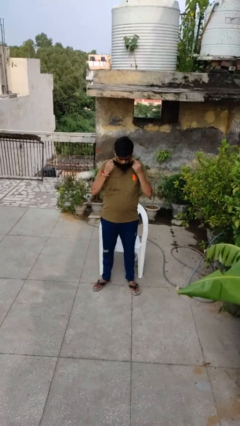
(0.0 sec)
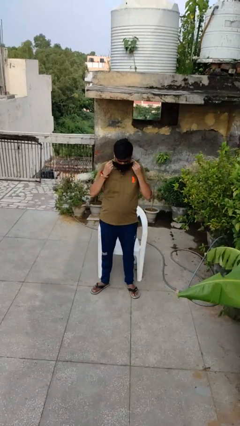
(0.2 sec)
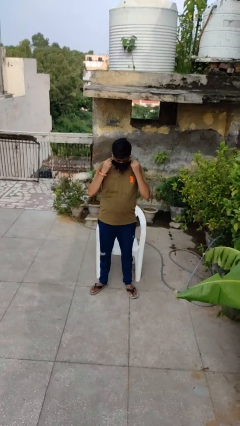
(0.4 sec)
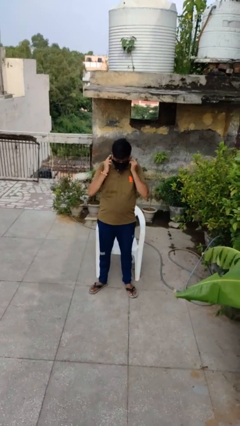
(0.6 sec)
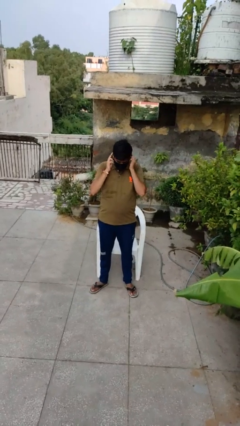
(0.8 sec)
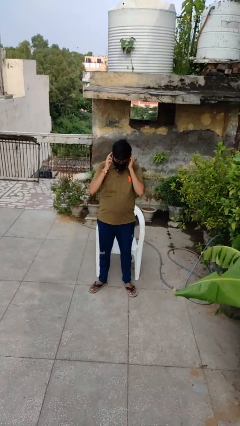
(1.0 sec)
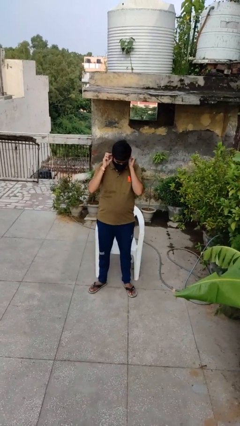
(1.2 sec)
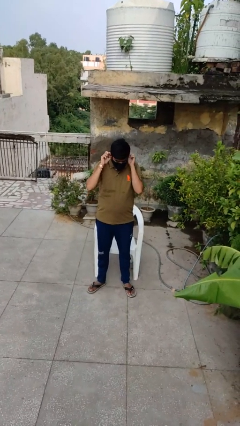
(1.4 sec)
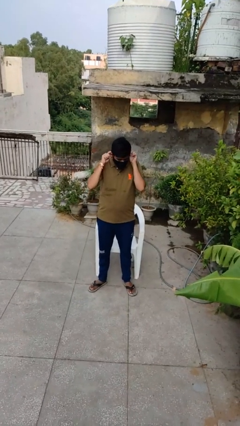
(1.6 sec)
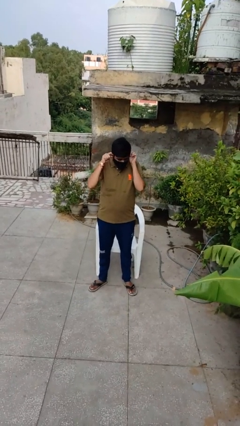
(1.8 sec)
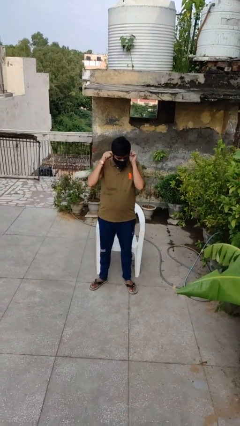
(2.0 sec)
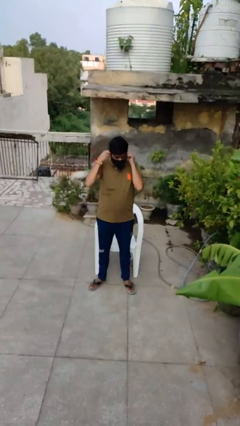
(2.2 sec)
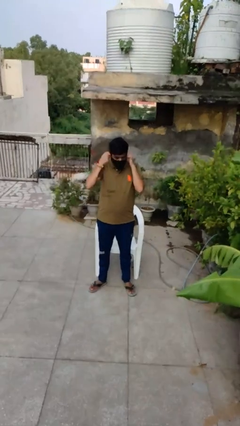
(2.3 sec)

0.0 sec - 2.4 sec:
person puts on facemask

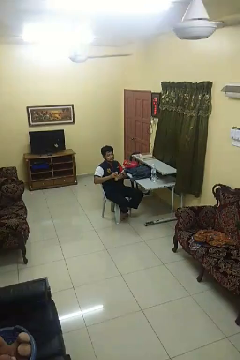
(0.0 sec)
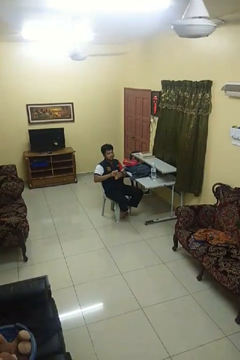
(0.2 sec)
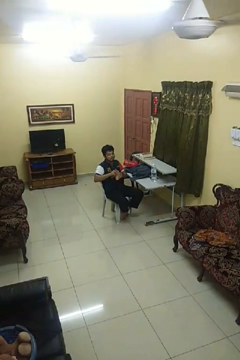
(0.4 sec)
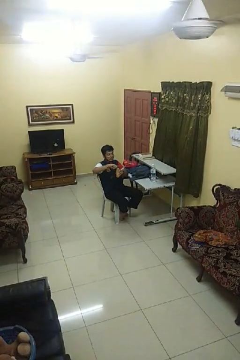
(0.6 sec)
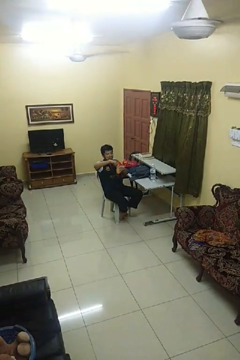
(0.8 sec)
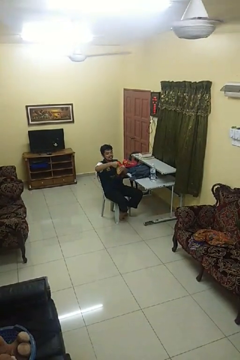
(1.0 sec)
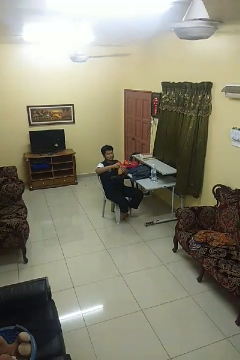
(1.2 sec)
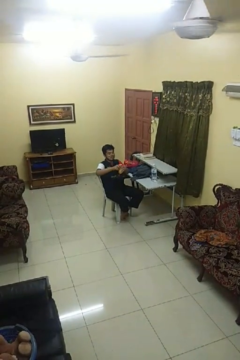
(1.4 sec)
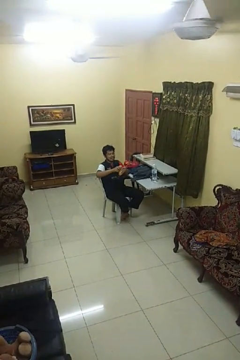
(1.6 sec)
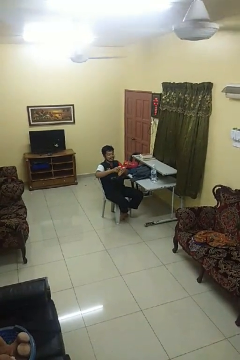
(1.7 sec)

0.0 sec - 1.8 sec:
person opens beverage can

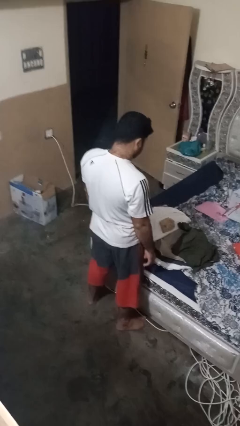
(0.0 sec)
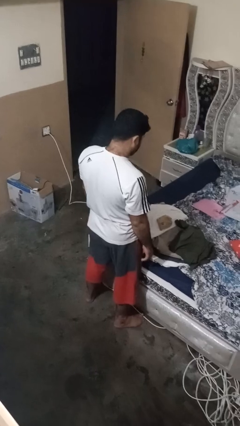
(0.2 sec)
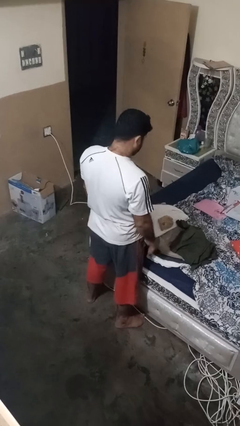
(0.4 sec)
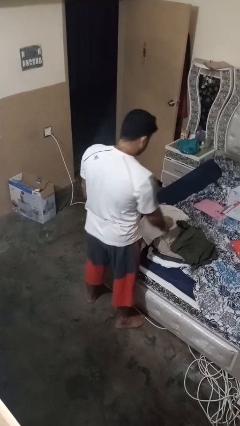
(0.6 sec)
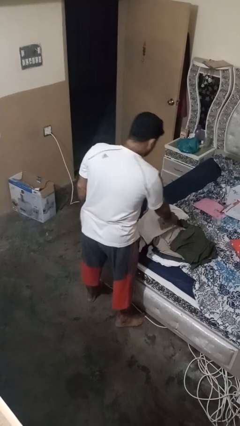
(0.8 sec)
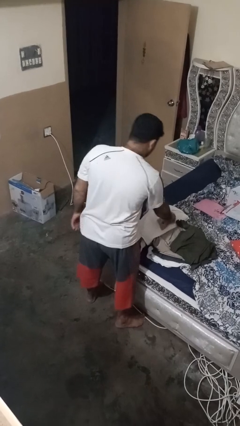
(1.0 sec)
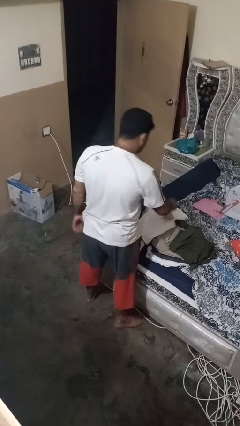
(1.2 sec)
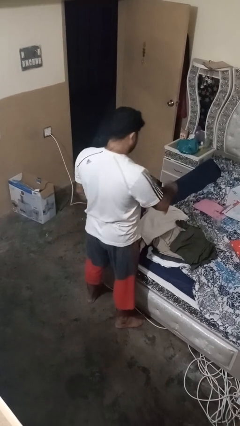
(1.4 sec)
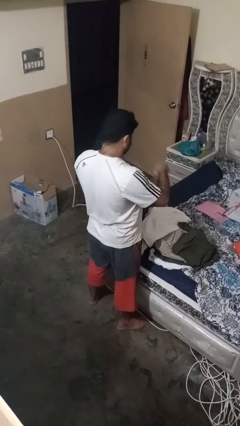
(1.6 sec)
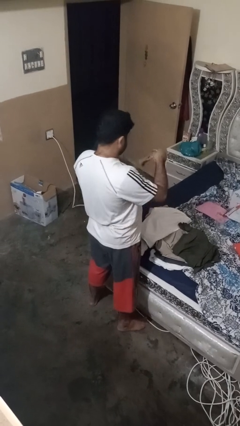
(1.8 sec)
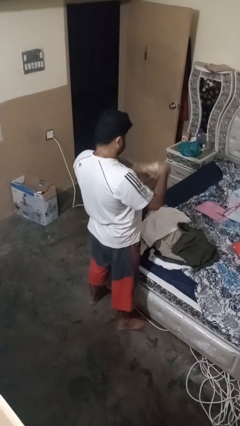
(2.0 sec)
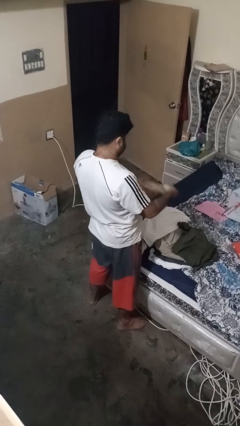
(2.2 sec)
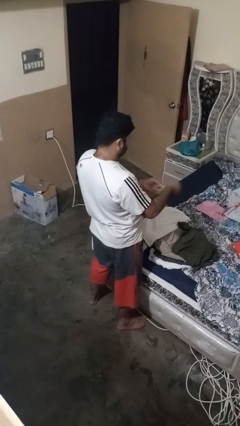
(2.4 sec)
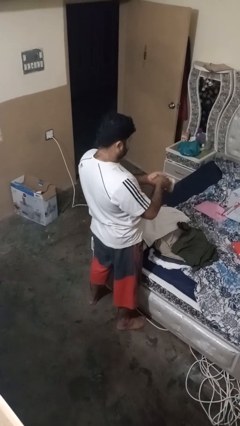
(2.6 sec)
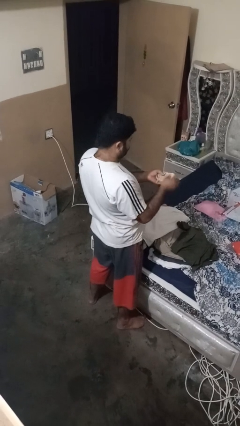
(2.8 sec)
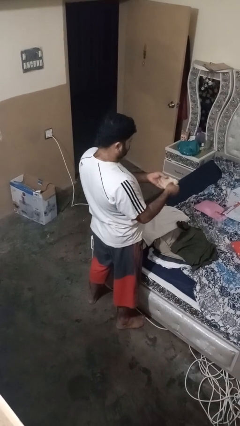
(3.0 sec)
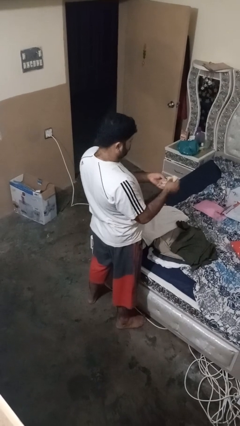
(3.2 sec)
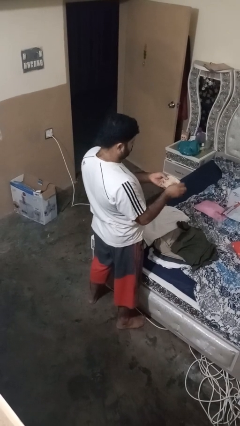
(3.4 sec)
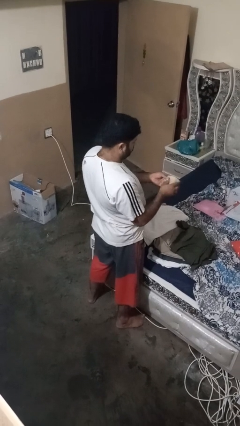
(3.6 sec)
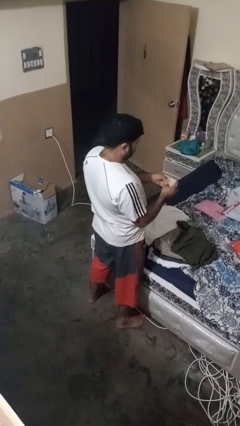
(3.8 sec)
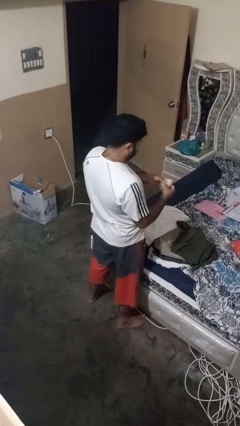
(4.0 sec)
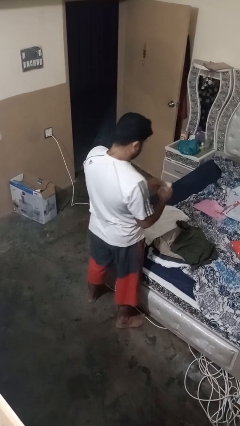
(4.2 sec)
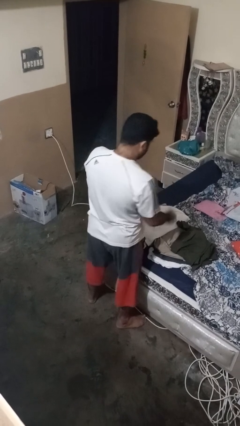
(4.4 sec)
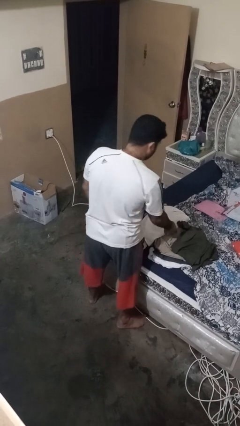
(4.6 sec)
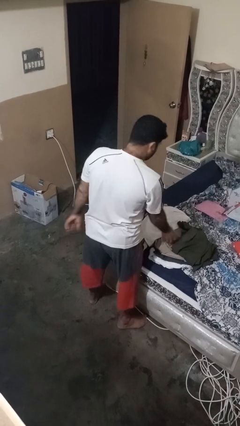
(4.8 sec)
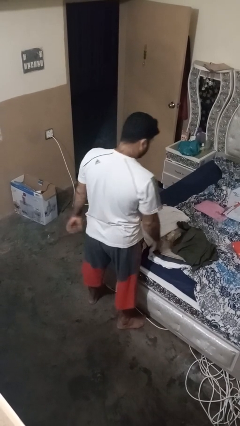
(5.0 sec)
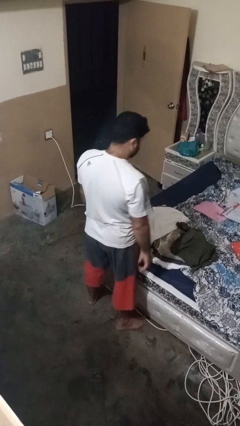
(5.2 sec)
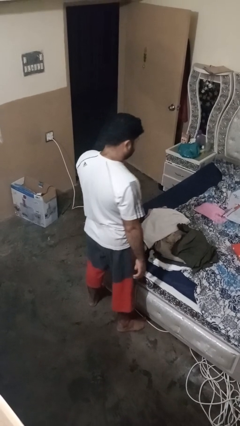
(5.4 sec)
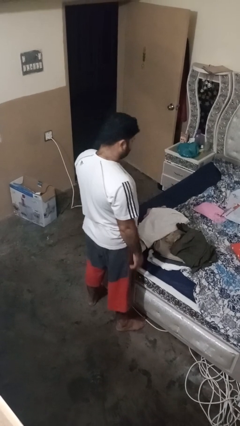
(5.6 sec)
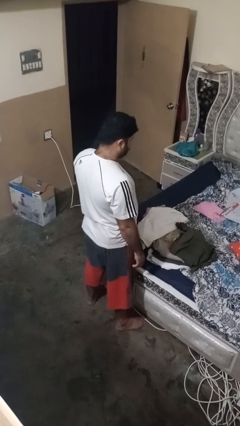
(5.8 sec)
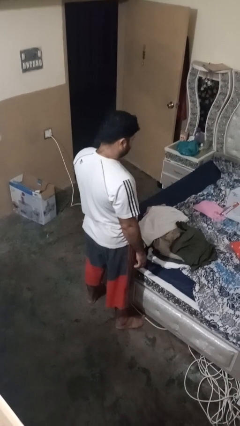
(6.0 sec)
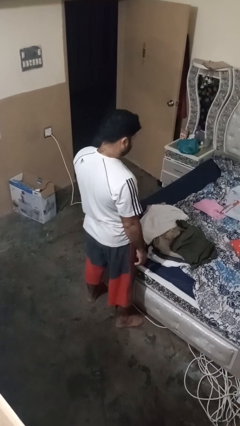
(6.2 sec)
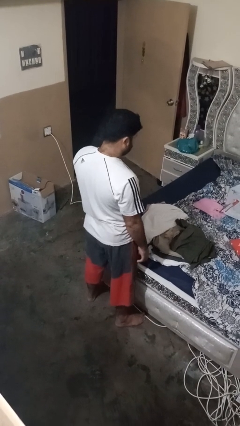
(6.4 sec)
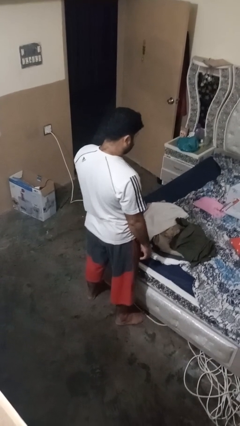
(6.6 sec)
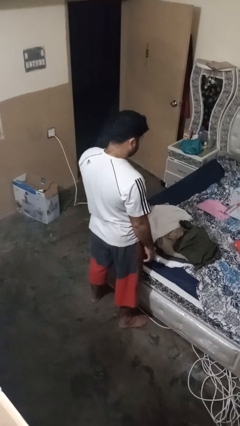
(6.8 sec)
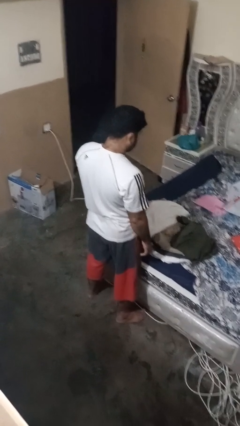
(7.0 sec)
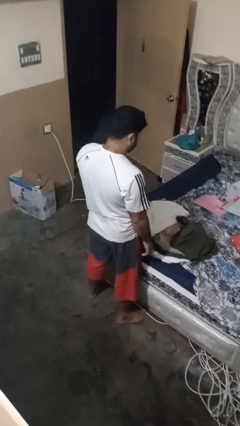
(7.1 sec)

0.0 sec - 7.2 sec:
person folds socks

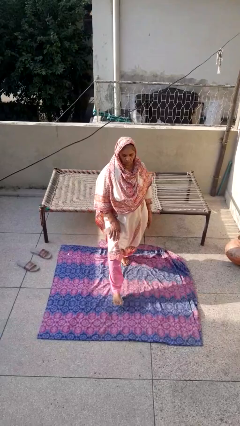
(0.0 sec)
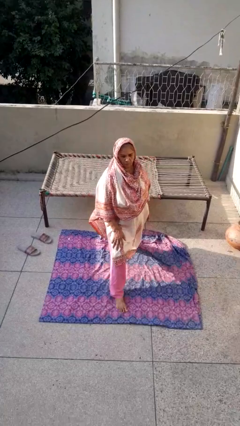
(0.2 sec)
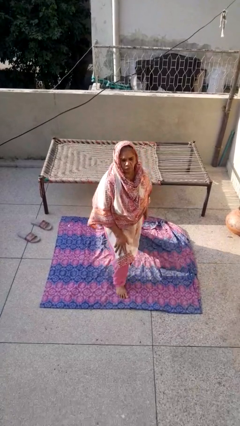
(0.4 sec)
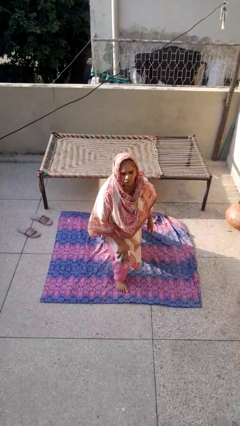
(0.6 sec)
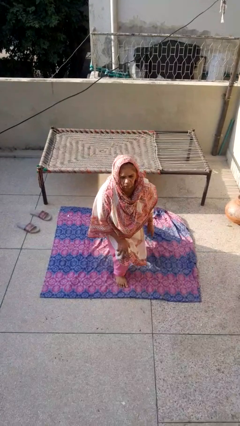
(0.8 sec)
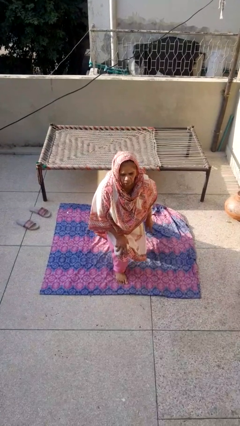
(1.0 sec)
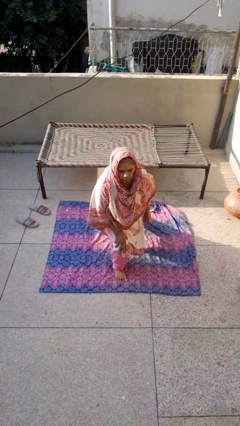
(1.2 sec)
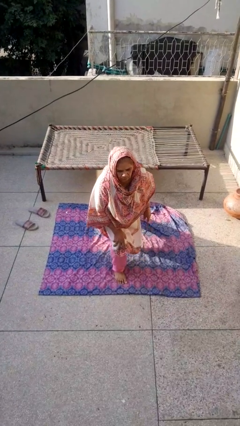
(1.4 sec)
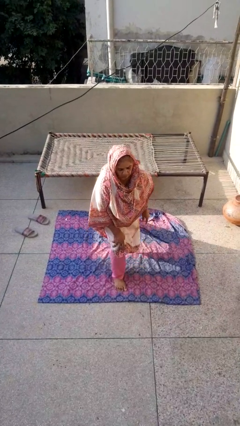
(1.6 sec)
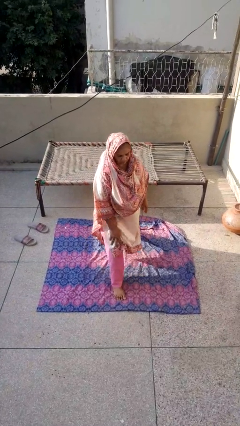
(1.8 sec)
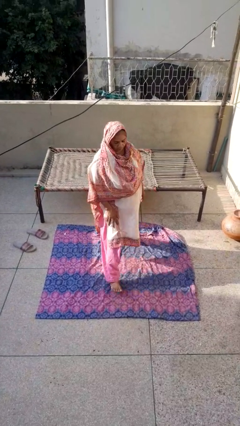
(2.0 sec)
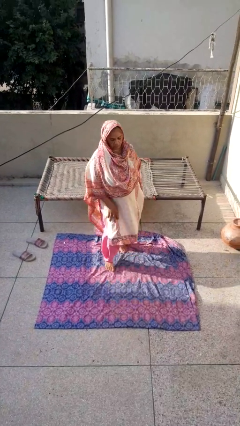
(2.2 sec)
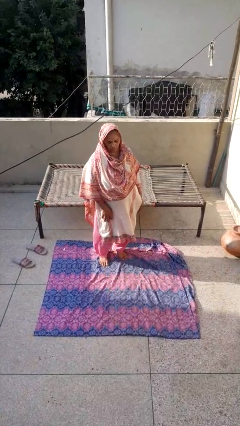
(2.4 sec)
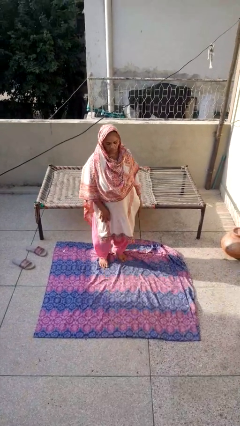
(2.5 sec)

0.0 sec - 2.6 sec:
person exercises with lunges

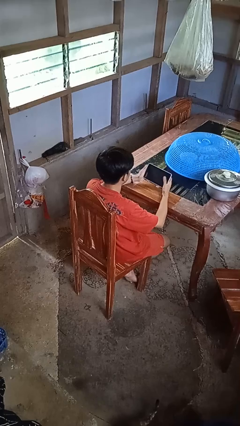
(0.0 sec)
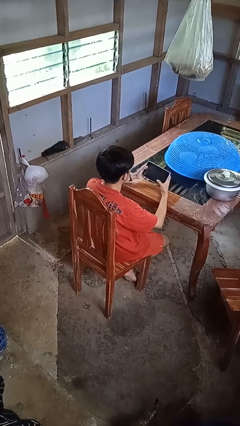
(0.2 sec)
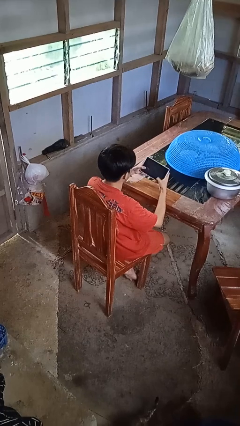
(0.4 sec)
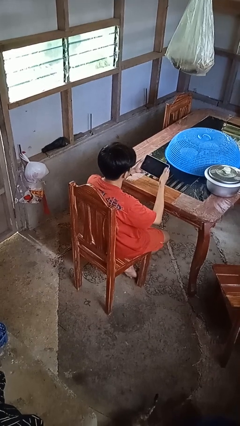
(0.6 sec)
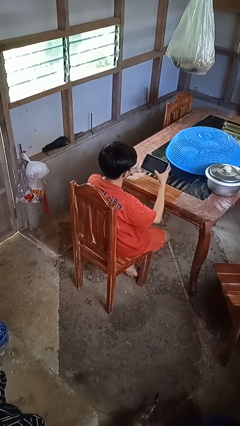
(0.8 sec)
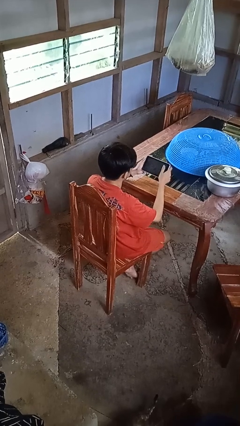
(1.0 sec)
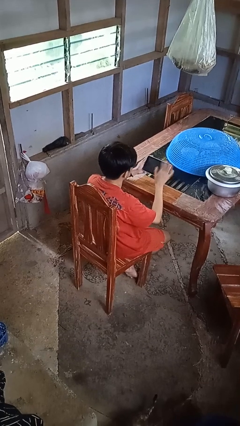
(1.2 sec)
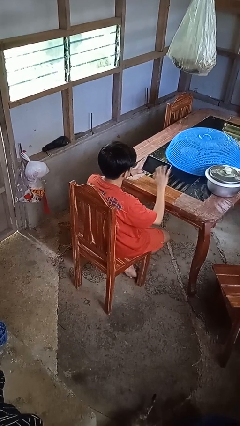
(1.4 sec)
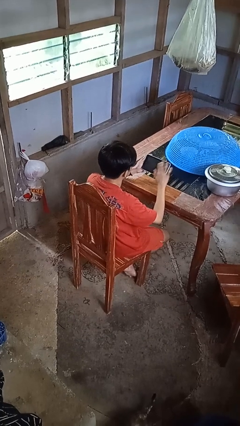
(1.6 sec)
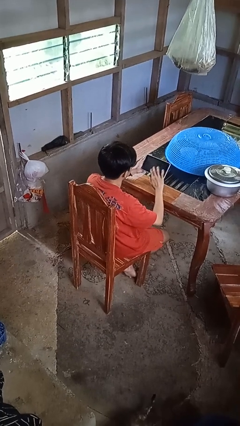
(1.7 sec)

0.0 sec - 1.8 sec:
person interacts with tablet

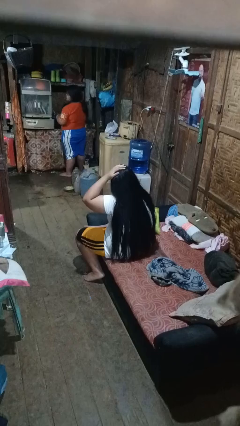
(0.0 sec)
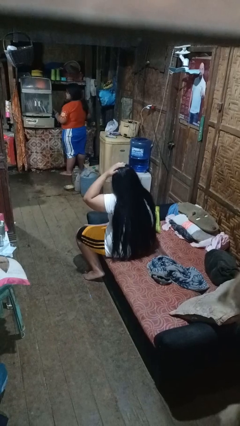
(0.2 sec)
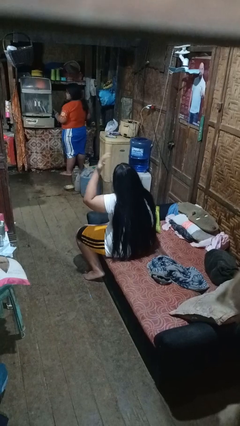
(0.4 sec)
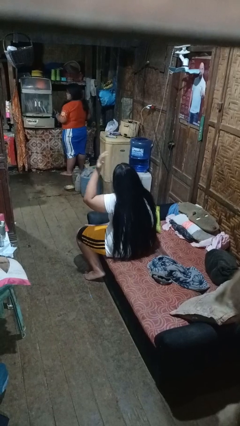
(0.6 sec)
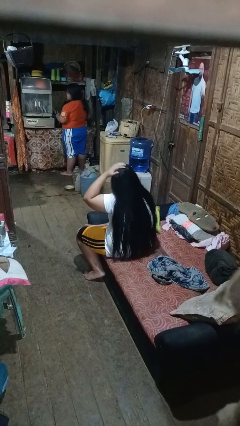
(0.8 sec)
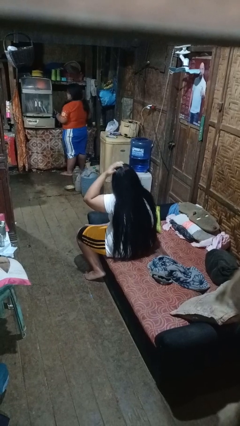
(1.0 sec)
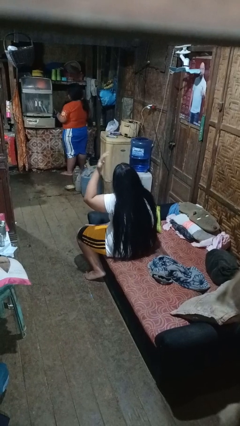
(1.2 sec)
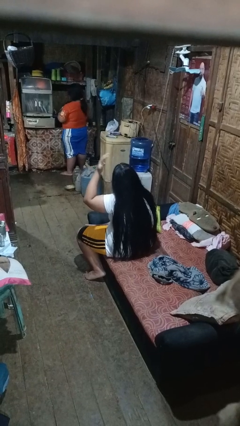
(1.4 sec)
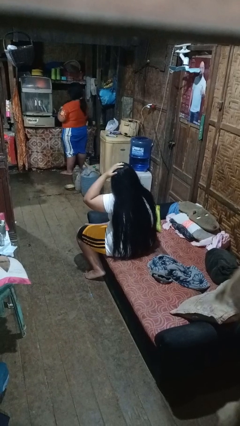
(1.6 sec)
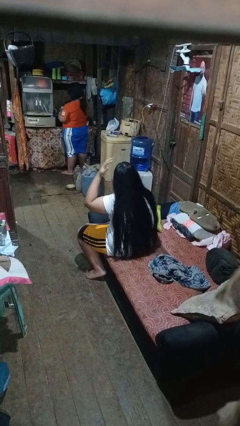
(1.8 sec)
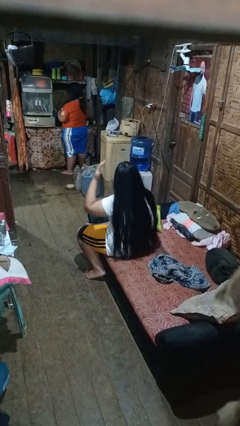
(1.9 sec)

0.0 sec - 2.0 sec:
person pats head
